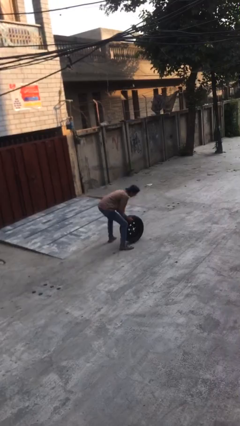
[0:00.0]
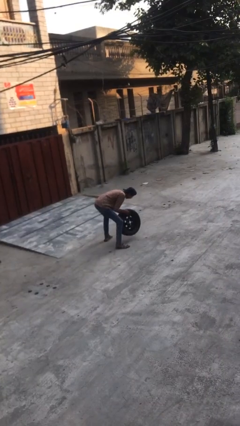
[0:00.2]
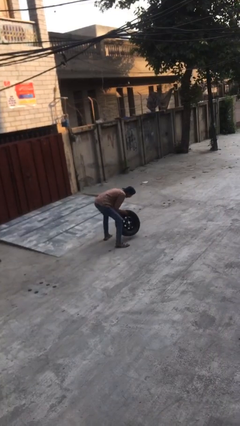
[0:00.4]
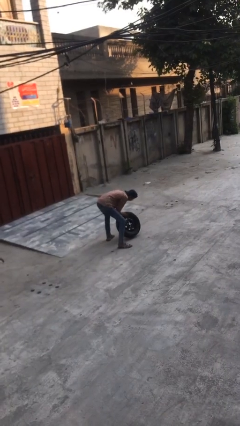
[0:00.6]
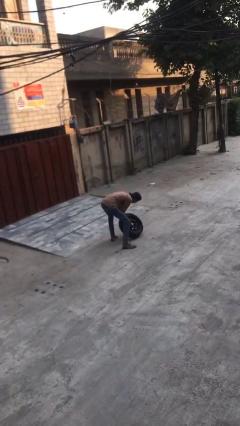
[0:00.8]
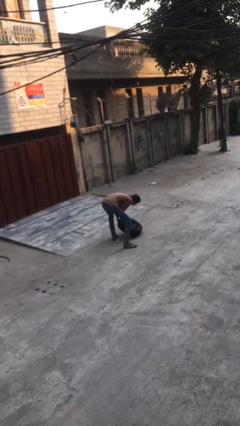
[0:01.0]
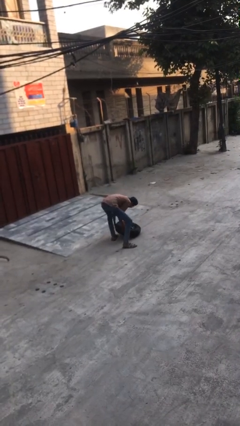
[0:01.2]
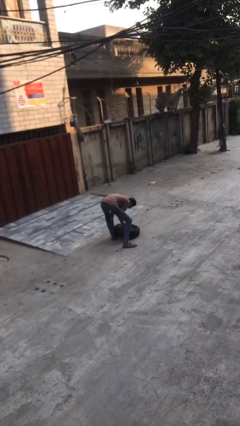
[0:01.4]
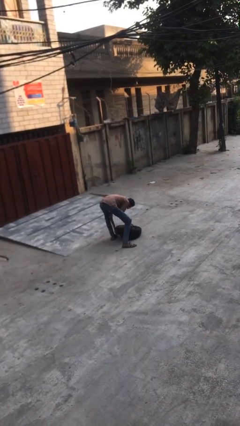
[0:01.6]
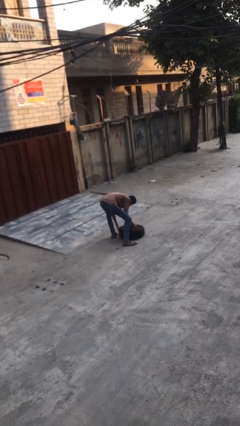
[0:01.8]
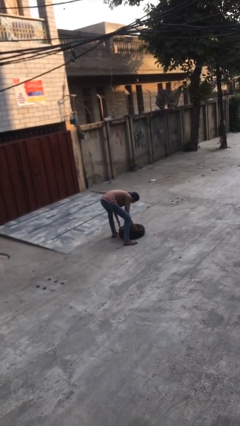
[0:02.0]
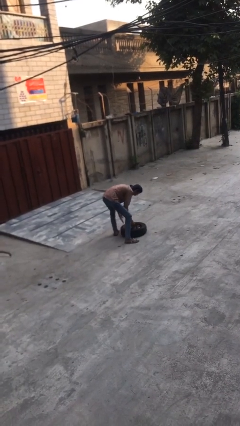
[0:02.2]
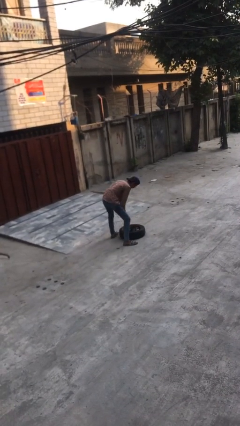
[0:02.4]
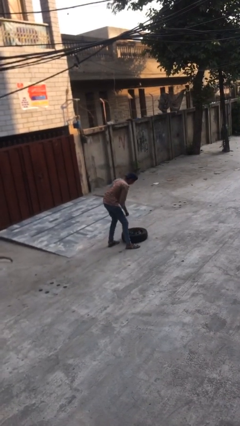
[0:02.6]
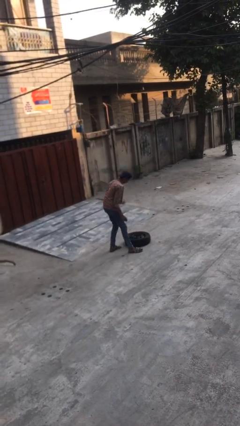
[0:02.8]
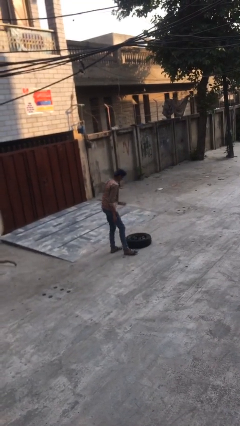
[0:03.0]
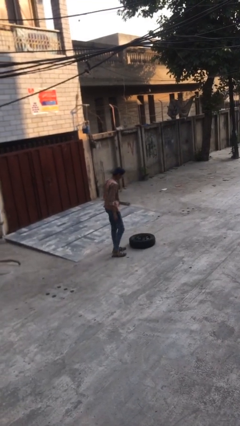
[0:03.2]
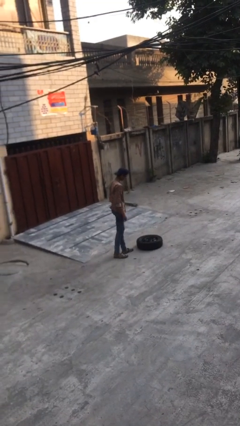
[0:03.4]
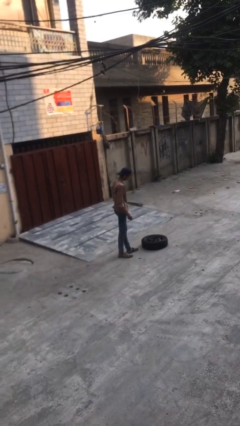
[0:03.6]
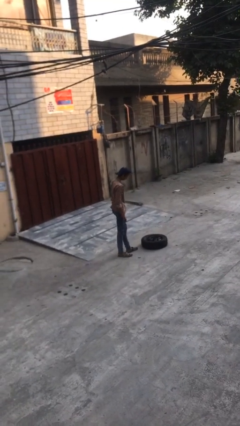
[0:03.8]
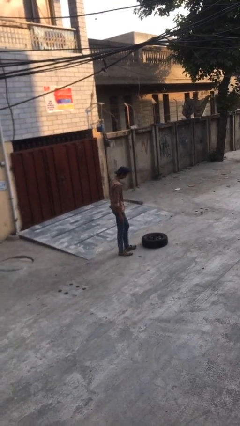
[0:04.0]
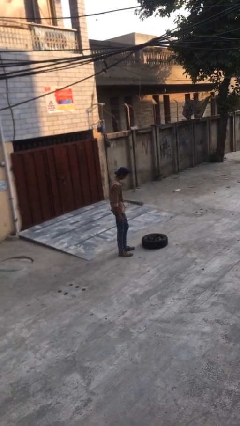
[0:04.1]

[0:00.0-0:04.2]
person puts down object on floor

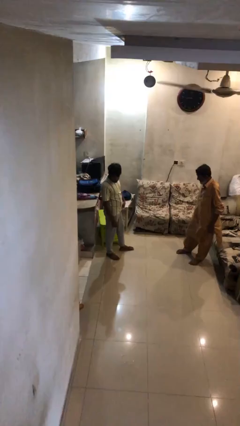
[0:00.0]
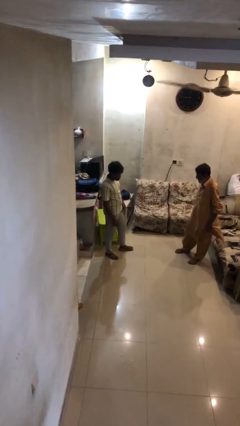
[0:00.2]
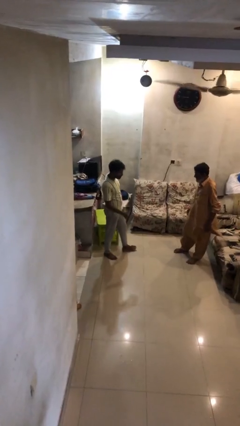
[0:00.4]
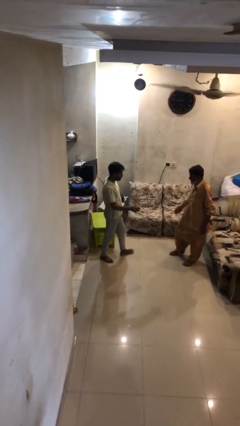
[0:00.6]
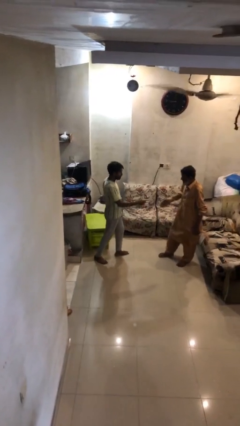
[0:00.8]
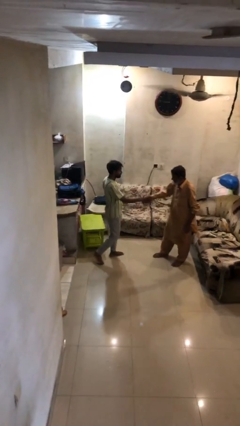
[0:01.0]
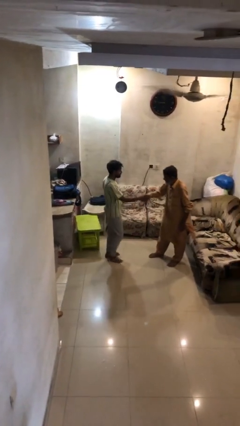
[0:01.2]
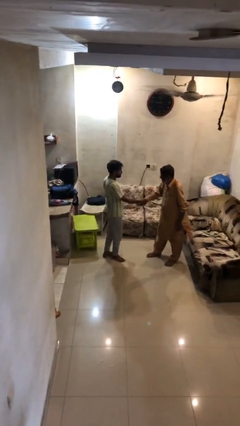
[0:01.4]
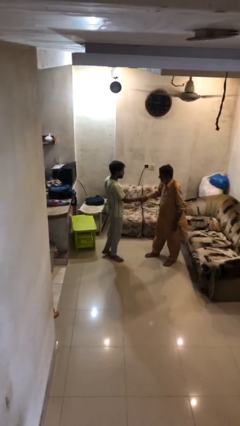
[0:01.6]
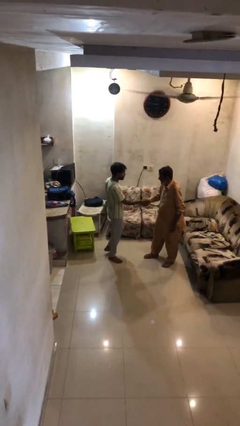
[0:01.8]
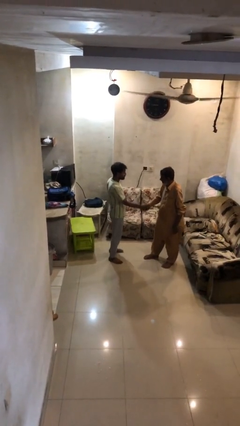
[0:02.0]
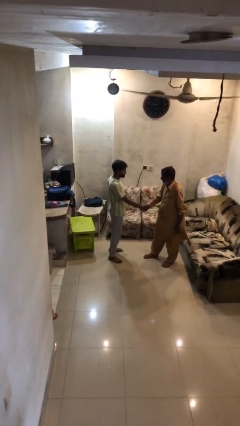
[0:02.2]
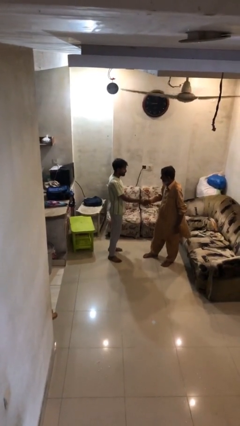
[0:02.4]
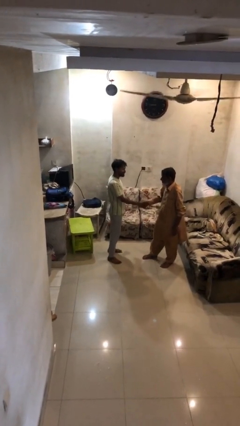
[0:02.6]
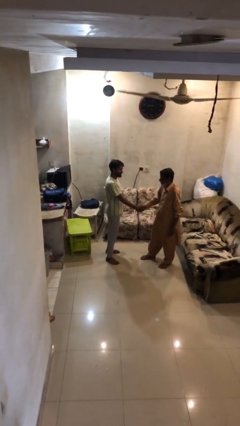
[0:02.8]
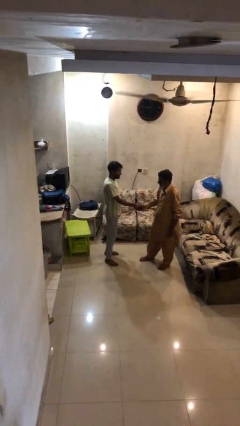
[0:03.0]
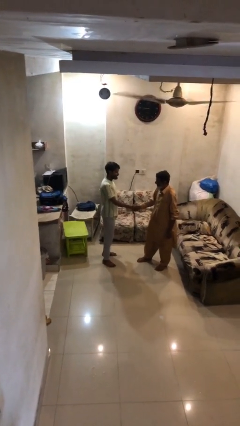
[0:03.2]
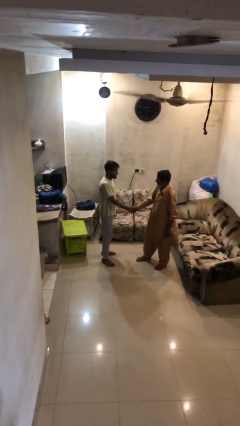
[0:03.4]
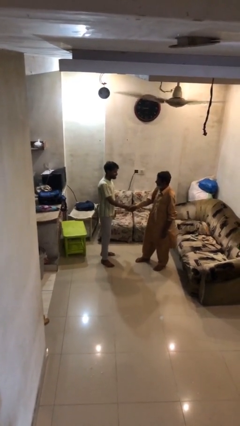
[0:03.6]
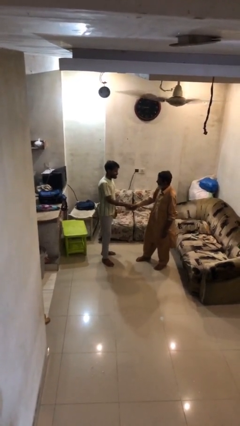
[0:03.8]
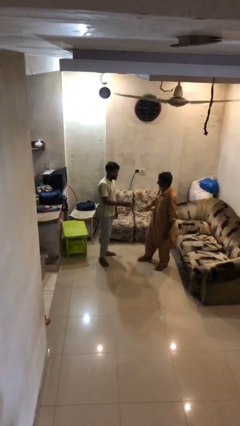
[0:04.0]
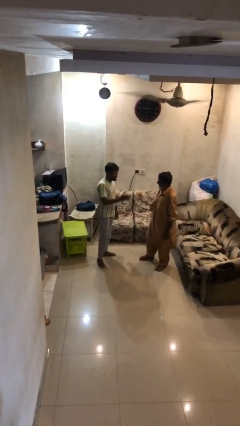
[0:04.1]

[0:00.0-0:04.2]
person shakes hand

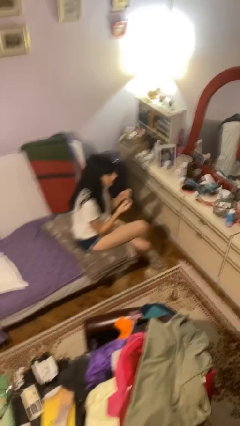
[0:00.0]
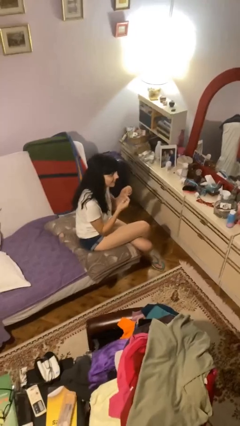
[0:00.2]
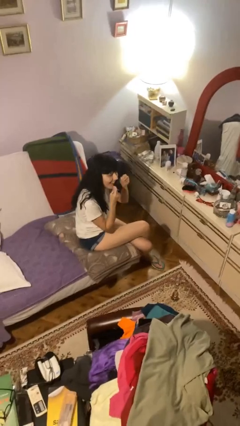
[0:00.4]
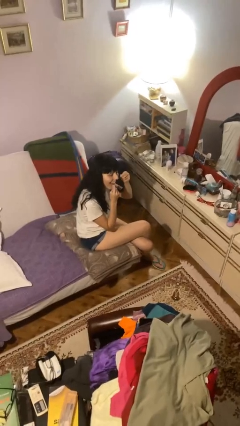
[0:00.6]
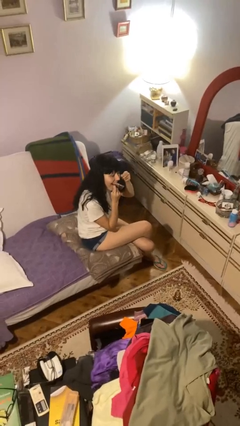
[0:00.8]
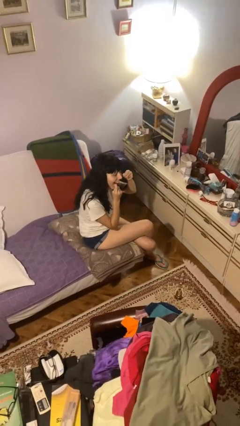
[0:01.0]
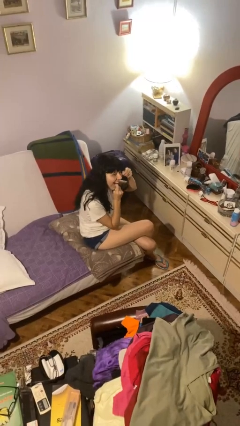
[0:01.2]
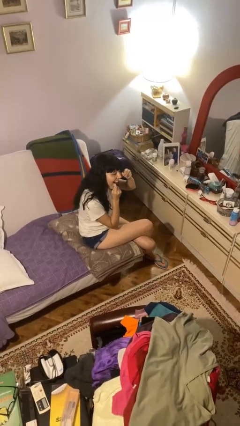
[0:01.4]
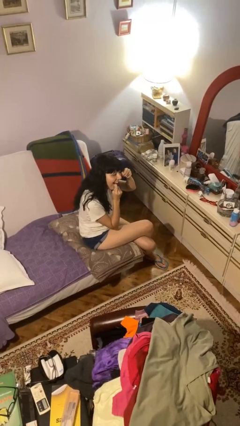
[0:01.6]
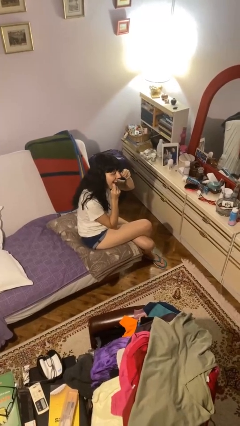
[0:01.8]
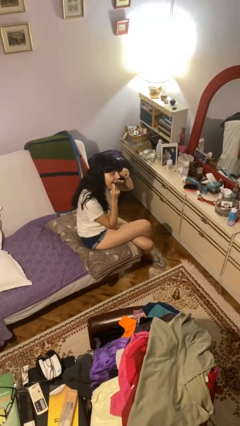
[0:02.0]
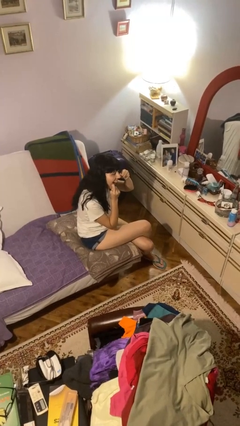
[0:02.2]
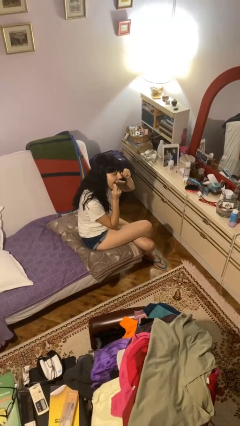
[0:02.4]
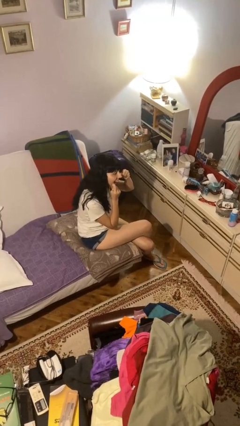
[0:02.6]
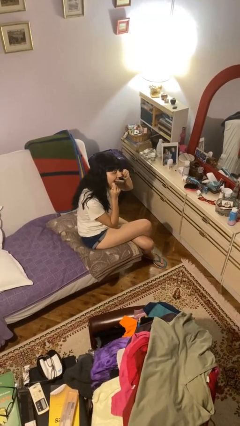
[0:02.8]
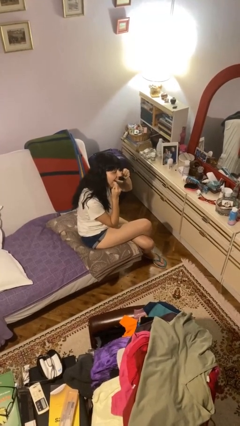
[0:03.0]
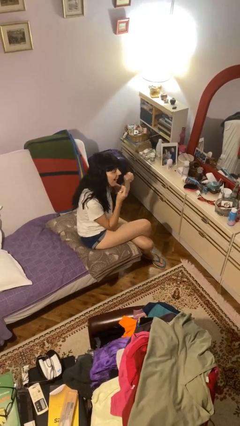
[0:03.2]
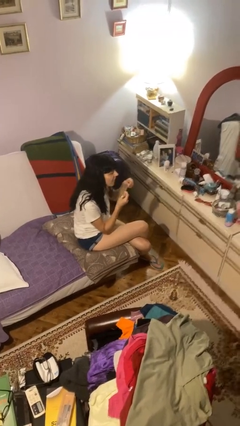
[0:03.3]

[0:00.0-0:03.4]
person flosses

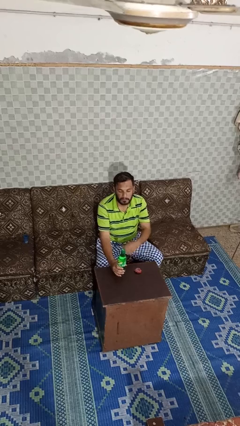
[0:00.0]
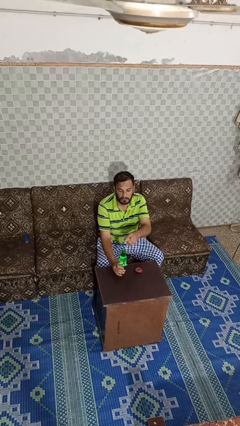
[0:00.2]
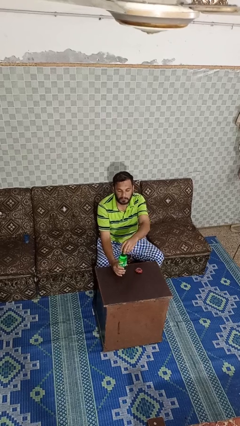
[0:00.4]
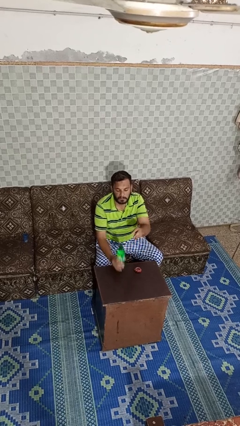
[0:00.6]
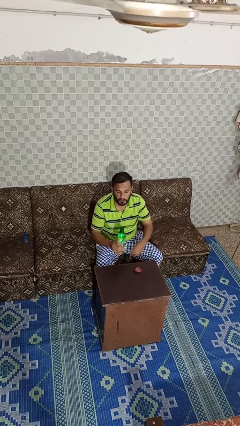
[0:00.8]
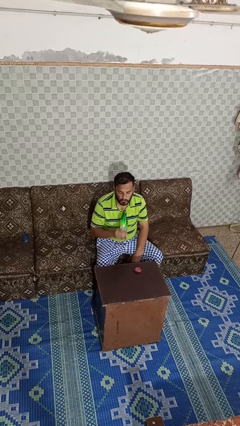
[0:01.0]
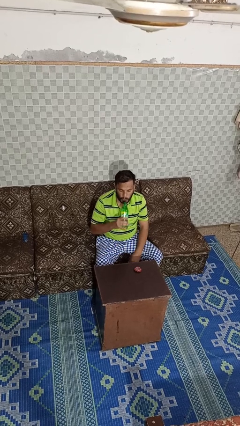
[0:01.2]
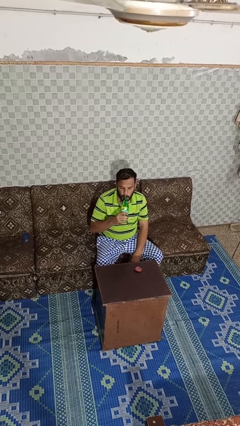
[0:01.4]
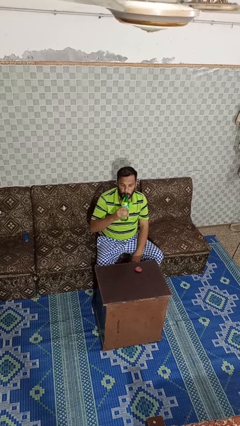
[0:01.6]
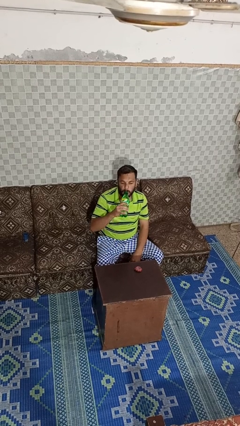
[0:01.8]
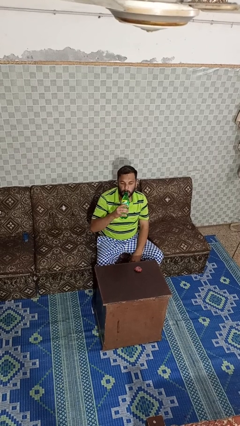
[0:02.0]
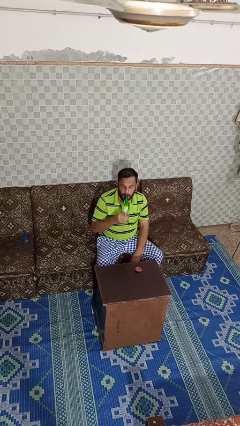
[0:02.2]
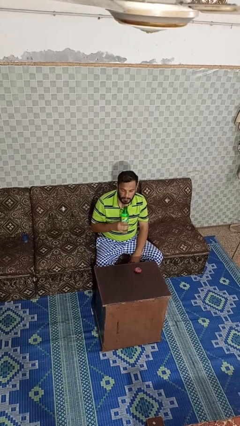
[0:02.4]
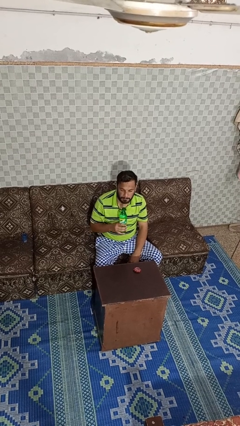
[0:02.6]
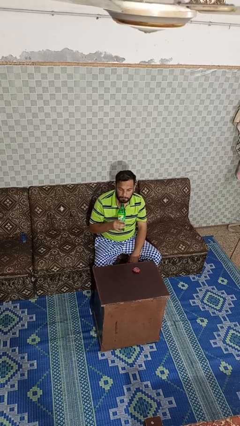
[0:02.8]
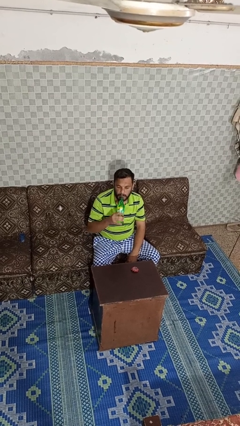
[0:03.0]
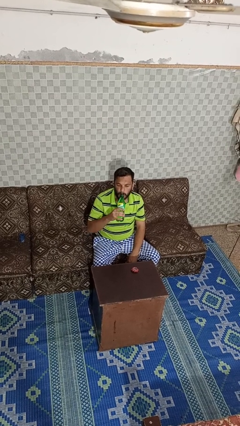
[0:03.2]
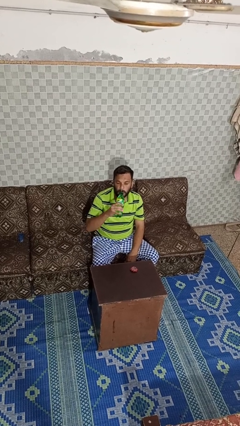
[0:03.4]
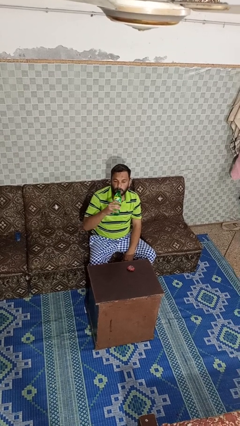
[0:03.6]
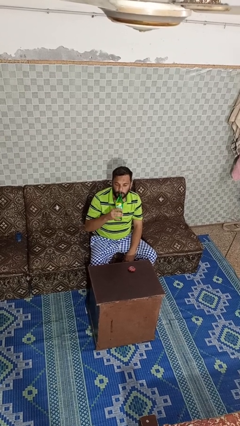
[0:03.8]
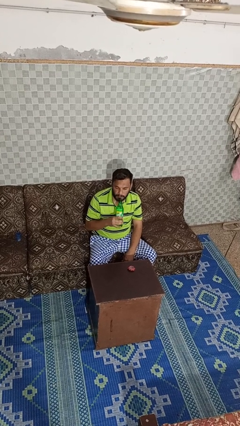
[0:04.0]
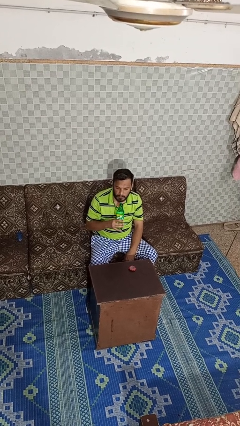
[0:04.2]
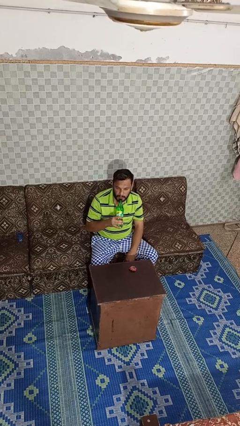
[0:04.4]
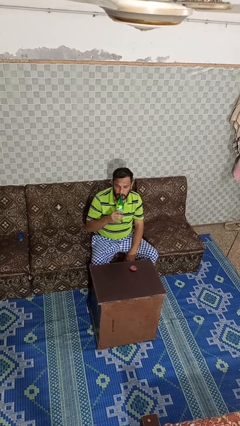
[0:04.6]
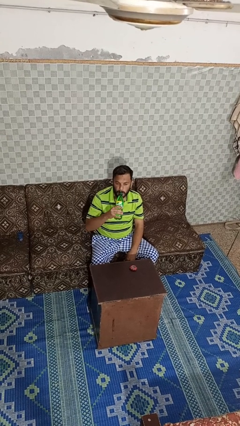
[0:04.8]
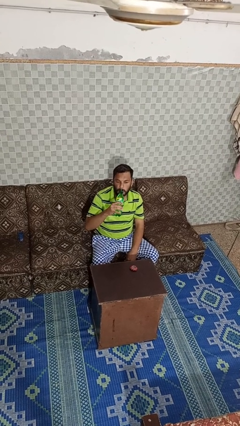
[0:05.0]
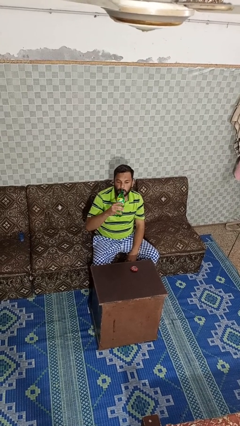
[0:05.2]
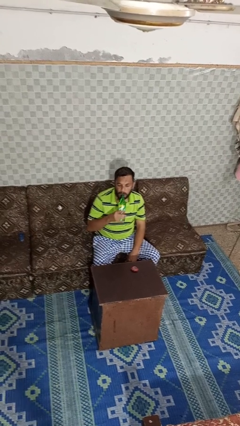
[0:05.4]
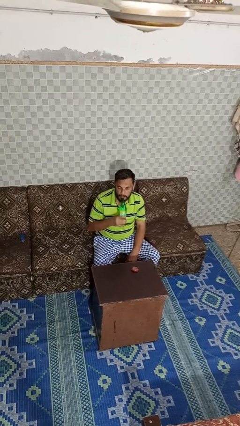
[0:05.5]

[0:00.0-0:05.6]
person drinks from bottle

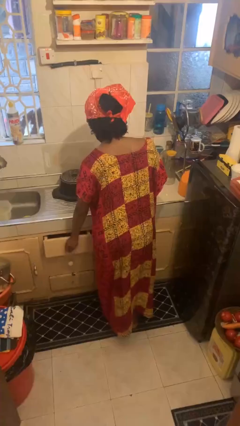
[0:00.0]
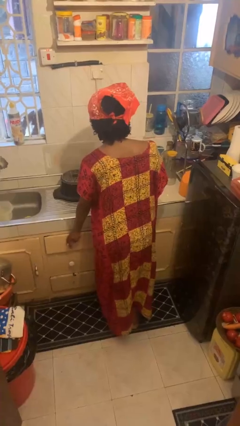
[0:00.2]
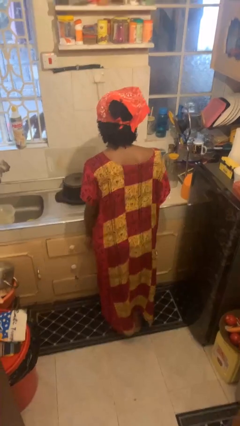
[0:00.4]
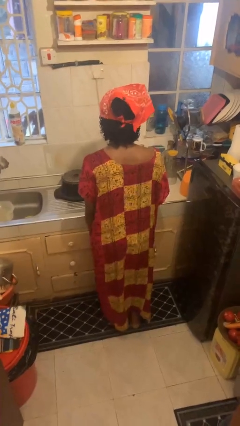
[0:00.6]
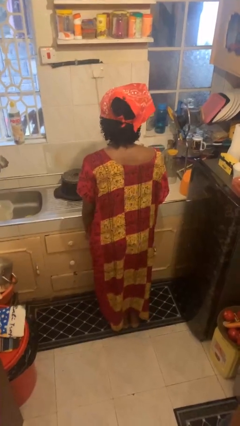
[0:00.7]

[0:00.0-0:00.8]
person closes kitchen drawer
